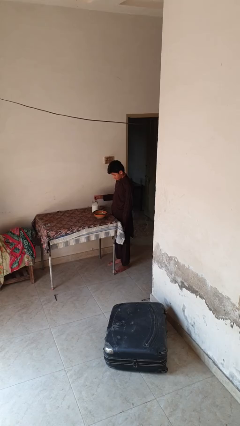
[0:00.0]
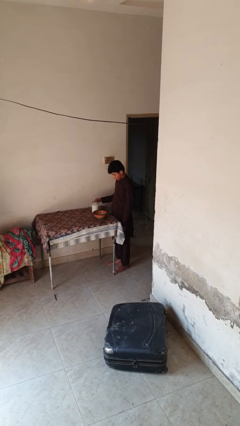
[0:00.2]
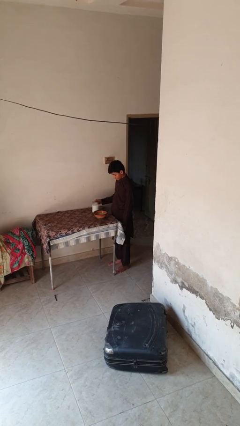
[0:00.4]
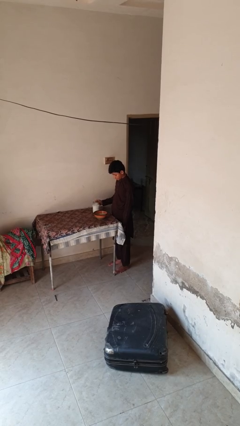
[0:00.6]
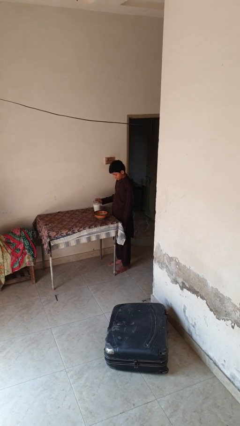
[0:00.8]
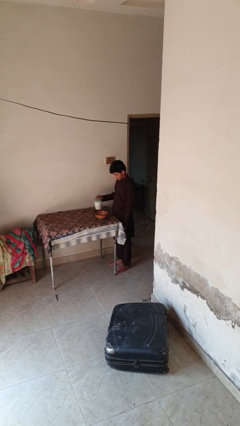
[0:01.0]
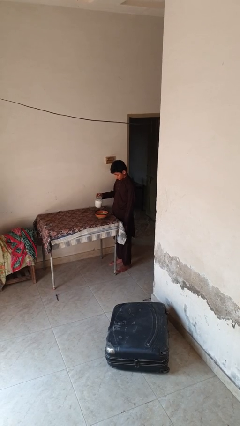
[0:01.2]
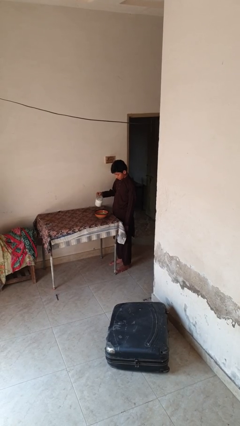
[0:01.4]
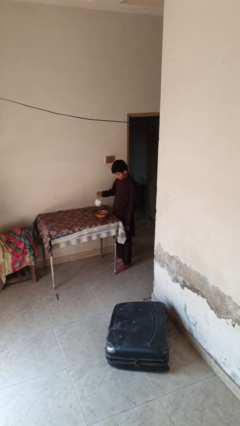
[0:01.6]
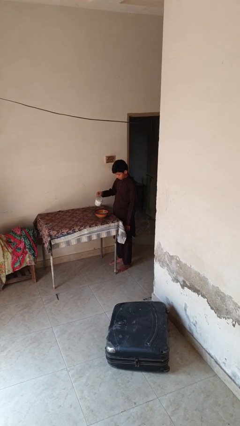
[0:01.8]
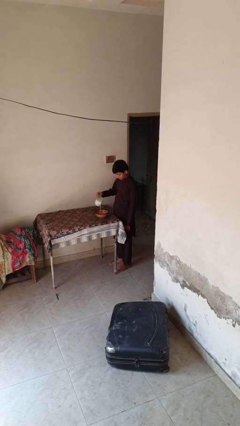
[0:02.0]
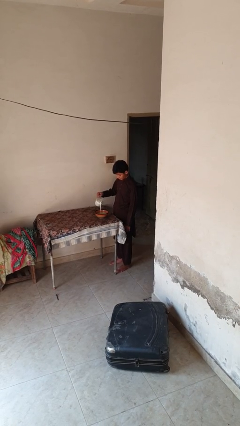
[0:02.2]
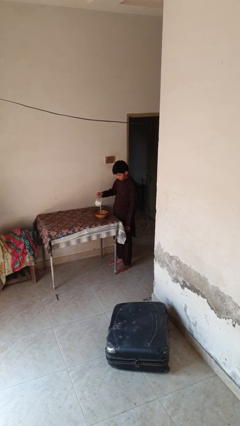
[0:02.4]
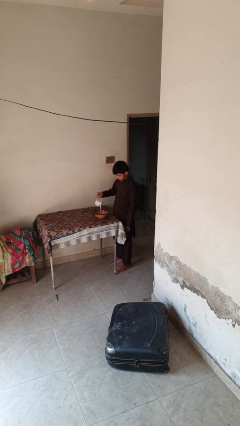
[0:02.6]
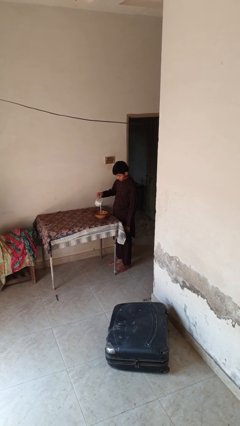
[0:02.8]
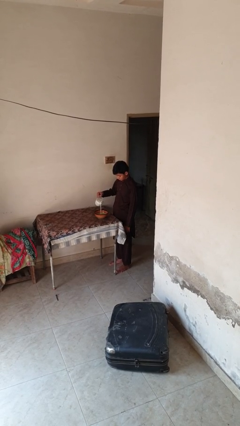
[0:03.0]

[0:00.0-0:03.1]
person pours into bowl

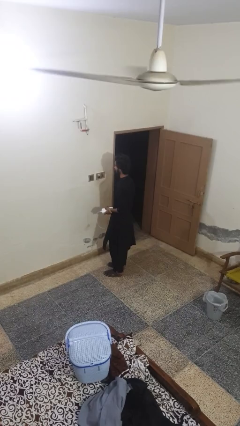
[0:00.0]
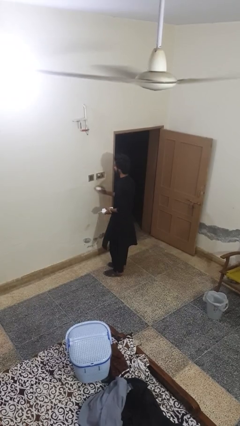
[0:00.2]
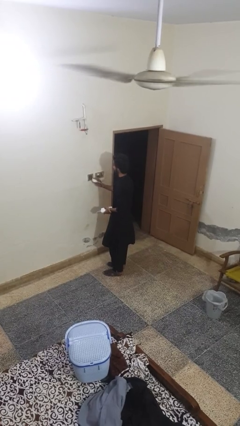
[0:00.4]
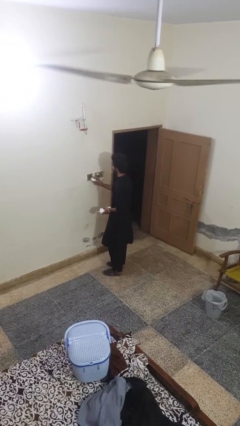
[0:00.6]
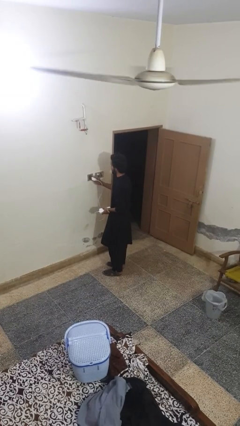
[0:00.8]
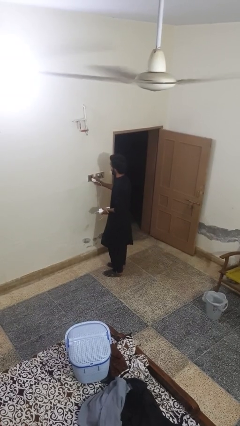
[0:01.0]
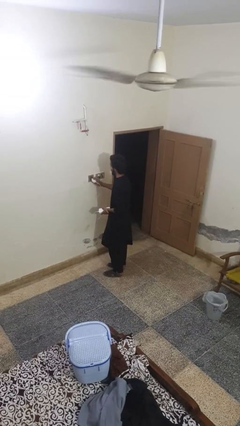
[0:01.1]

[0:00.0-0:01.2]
person plugs into electrical socket

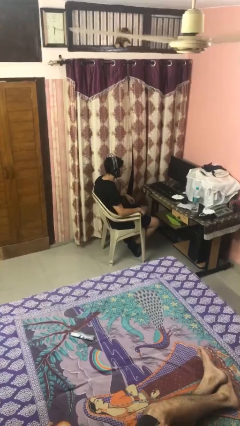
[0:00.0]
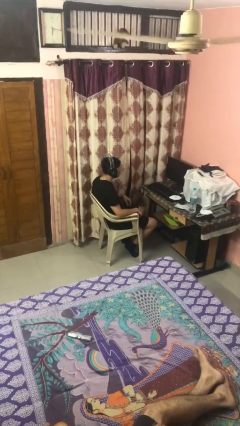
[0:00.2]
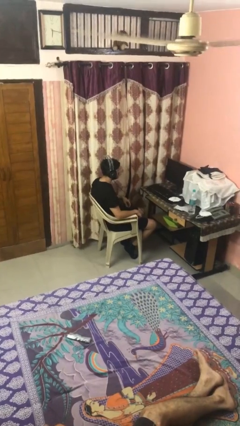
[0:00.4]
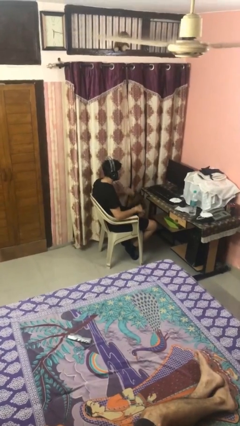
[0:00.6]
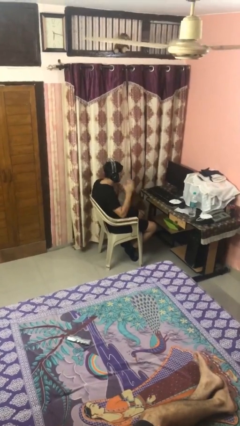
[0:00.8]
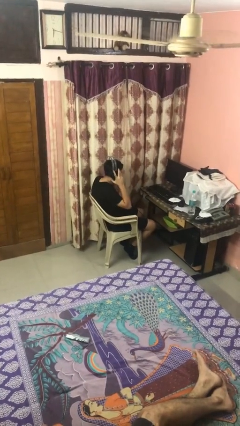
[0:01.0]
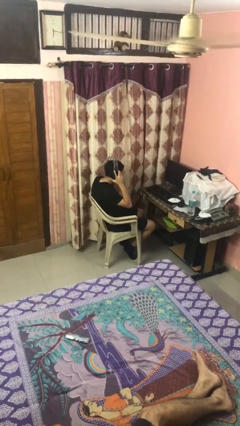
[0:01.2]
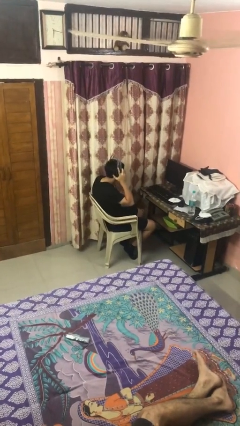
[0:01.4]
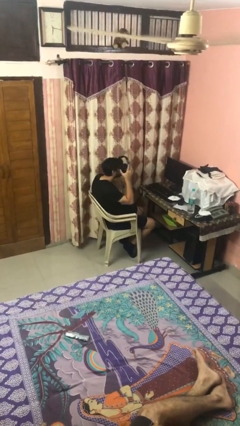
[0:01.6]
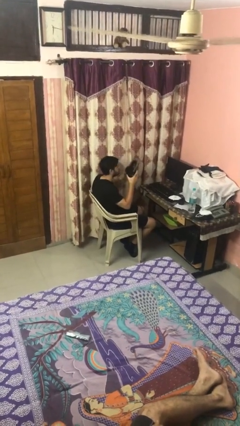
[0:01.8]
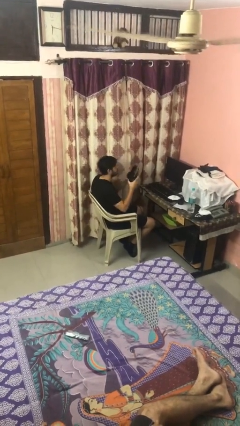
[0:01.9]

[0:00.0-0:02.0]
person takes off headphones

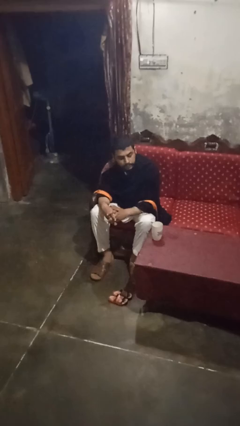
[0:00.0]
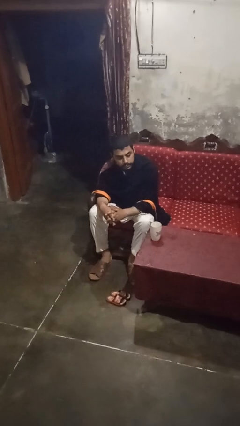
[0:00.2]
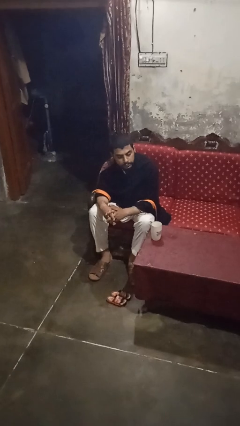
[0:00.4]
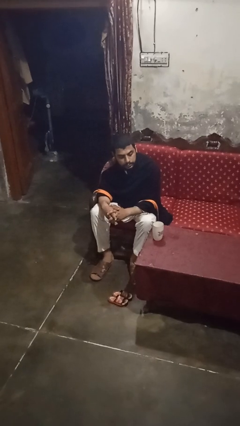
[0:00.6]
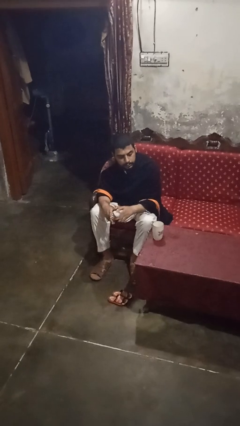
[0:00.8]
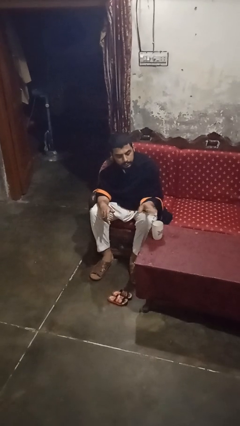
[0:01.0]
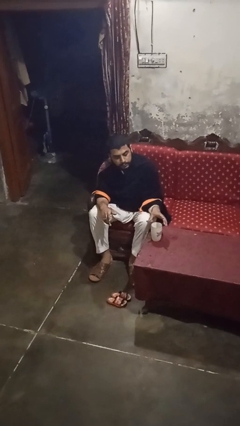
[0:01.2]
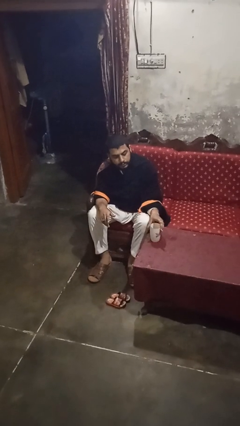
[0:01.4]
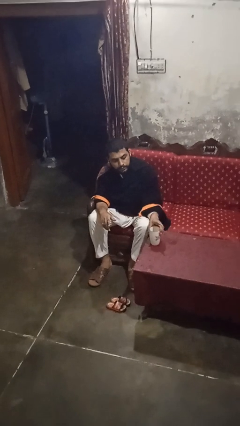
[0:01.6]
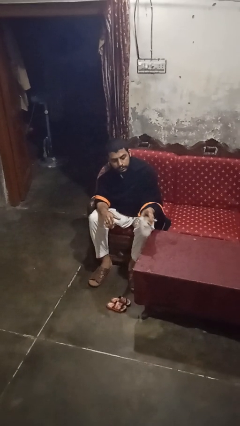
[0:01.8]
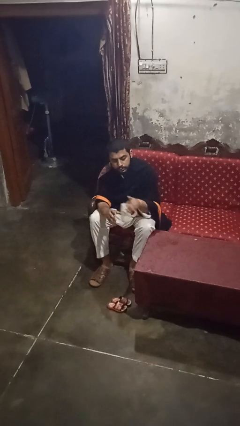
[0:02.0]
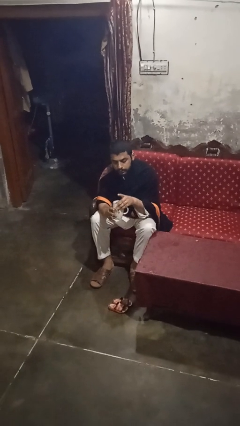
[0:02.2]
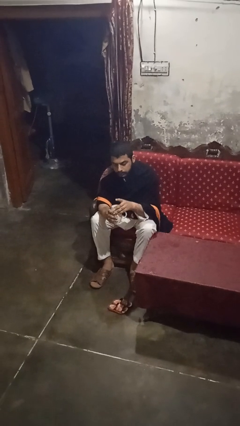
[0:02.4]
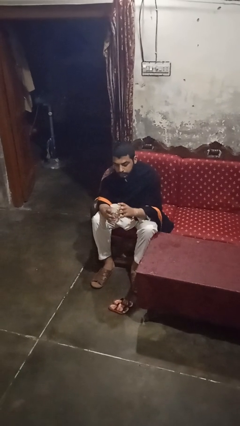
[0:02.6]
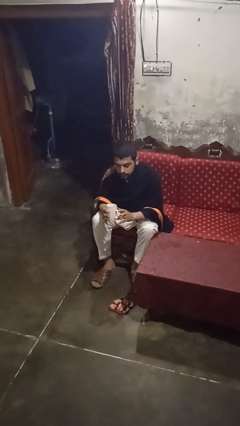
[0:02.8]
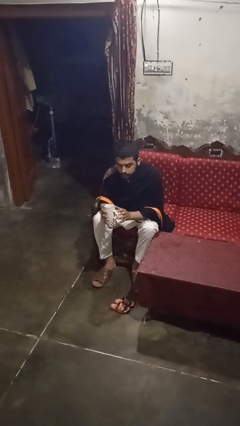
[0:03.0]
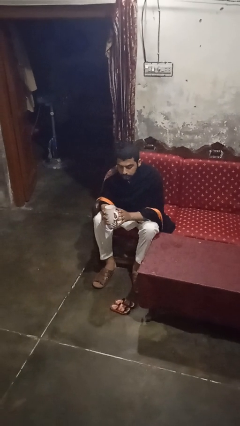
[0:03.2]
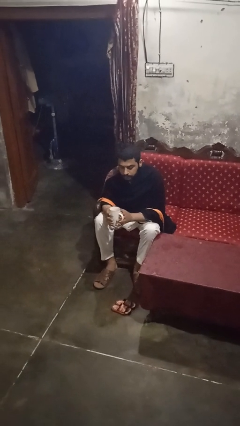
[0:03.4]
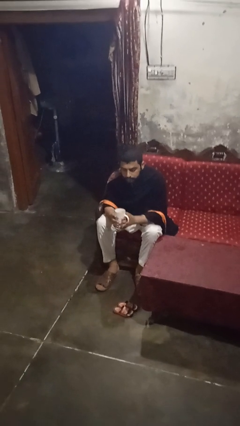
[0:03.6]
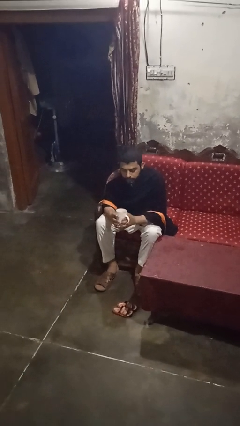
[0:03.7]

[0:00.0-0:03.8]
person picks up object from table

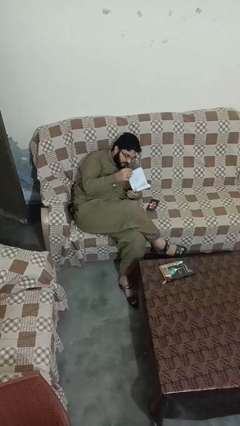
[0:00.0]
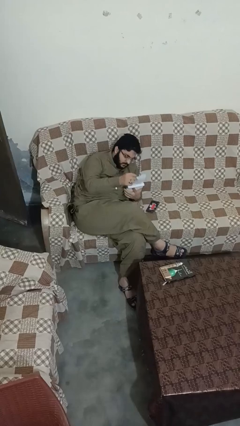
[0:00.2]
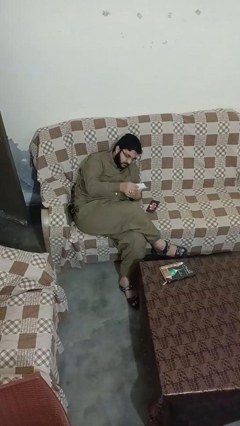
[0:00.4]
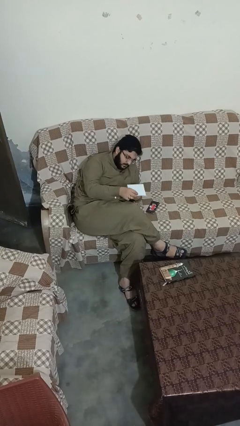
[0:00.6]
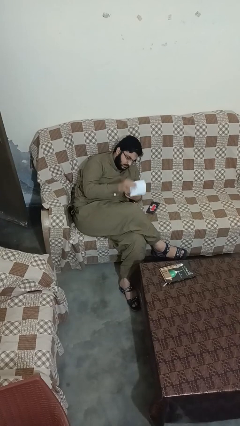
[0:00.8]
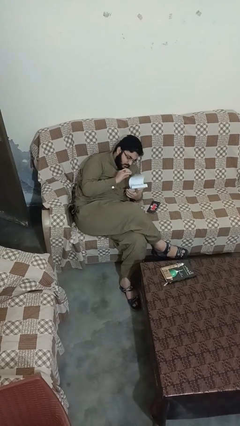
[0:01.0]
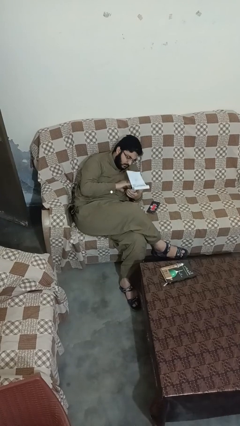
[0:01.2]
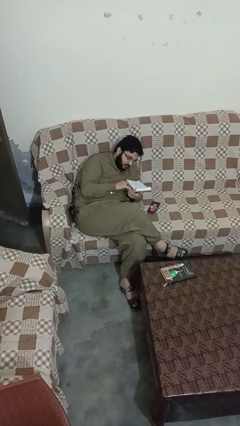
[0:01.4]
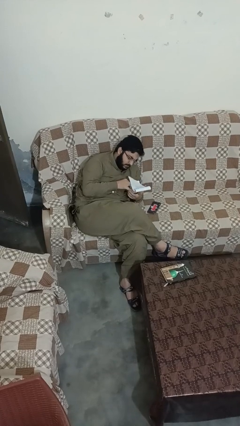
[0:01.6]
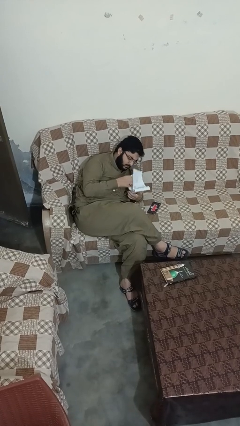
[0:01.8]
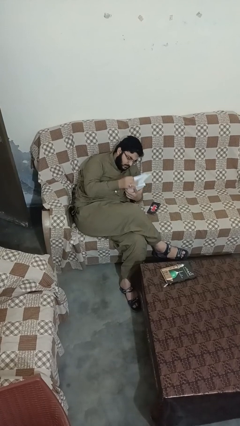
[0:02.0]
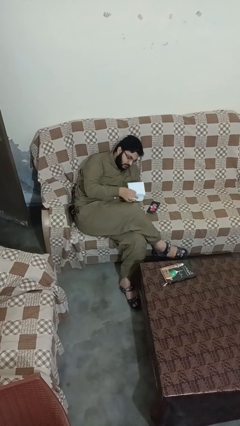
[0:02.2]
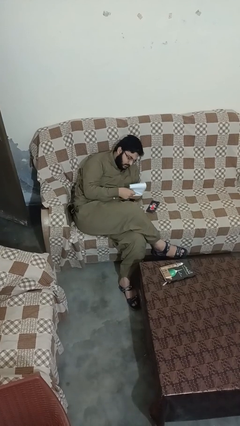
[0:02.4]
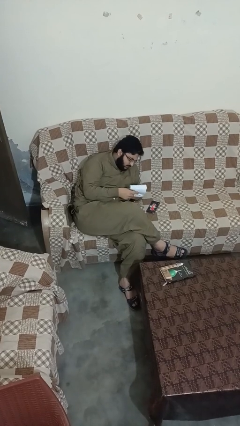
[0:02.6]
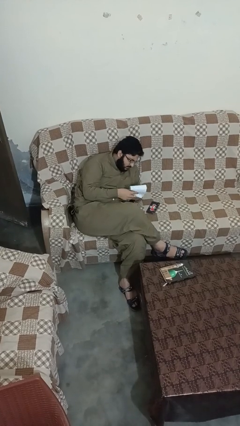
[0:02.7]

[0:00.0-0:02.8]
person reads magazine

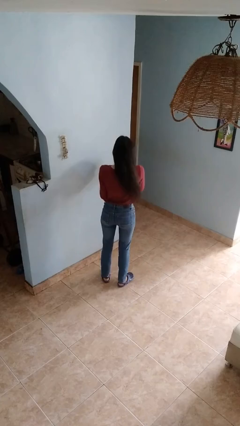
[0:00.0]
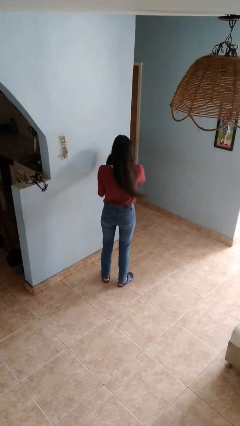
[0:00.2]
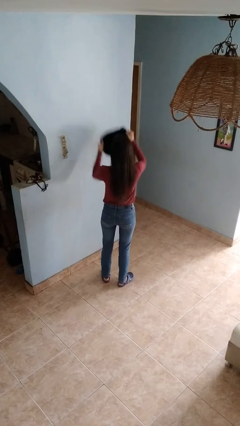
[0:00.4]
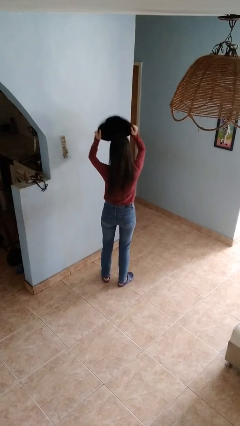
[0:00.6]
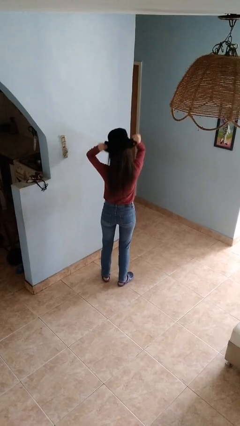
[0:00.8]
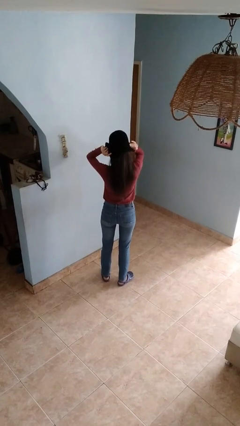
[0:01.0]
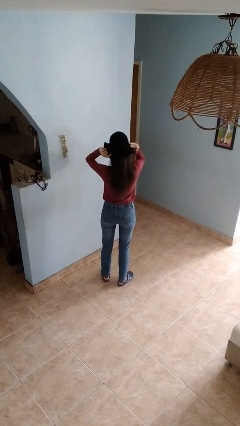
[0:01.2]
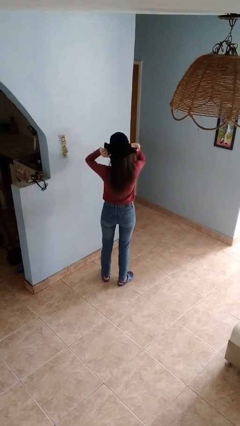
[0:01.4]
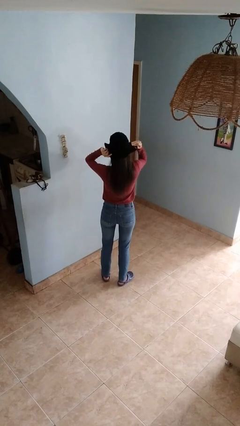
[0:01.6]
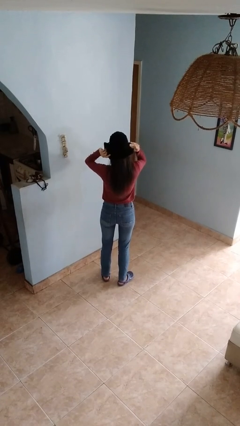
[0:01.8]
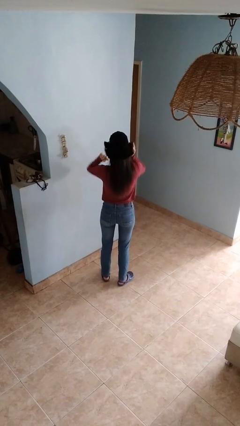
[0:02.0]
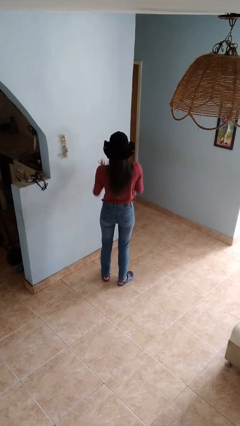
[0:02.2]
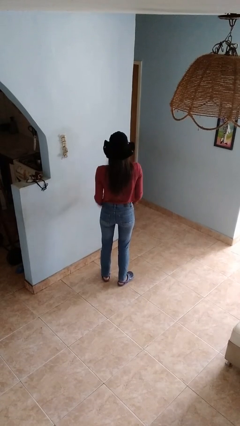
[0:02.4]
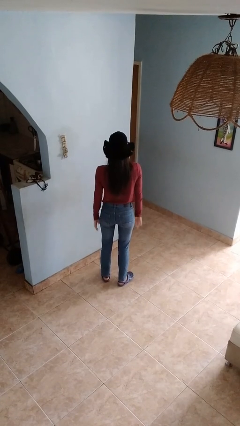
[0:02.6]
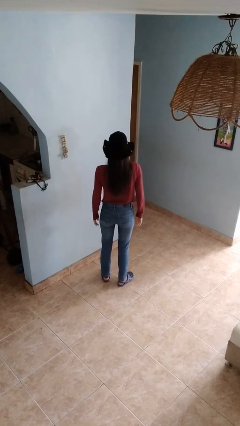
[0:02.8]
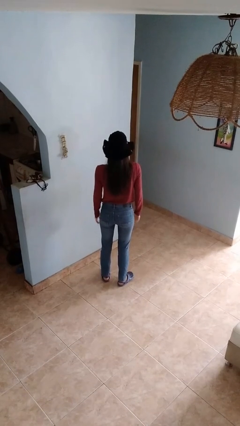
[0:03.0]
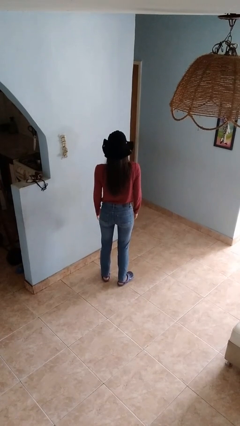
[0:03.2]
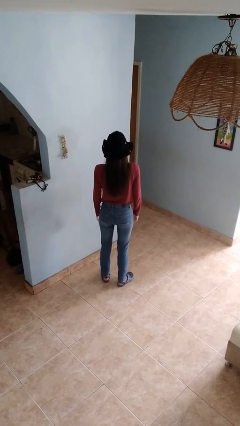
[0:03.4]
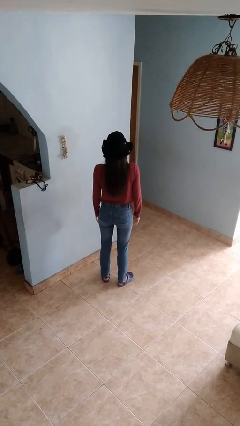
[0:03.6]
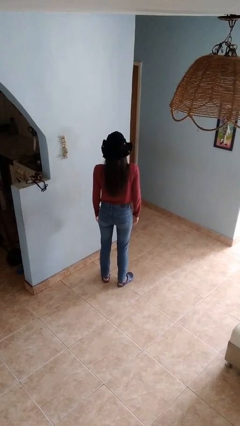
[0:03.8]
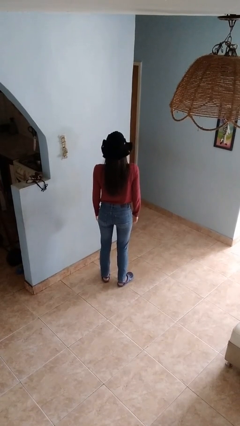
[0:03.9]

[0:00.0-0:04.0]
person puts on hat
